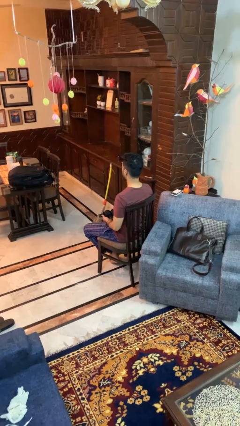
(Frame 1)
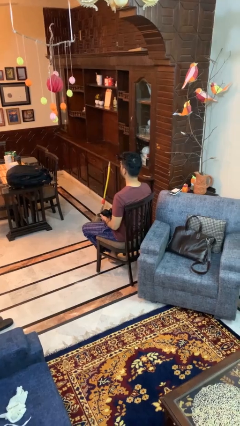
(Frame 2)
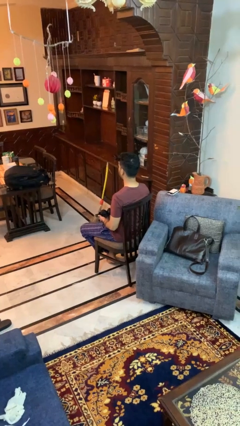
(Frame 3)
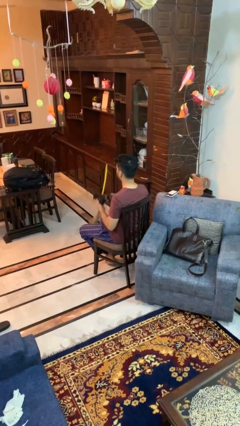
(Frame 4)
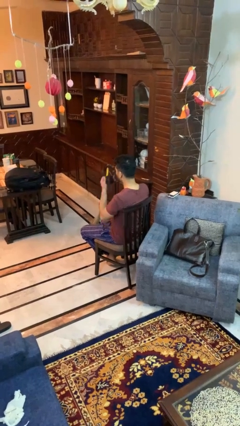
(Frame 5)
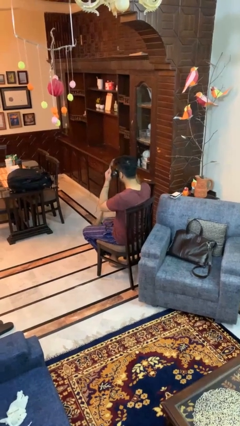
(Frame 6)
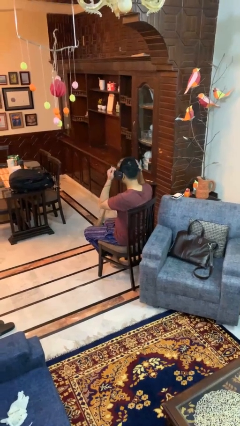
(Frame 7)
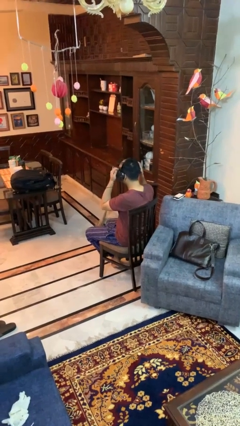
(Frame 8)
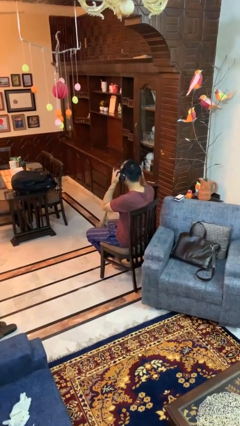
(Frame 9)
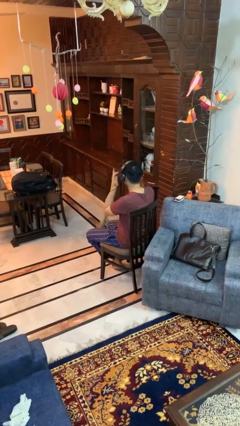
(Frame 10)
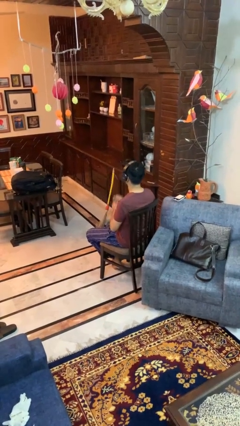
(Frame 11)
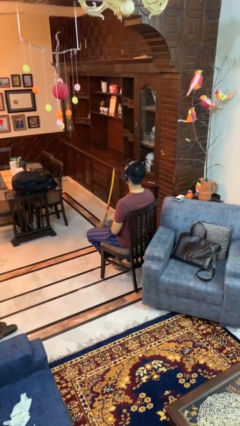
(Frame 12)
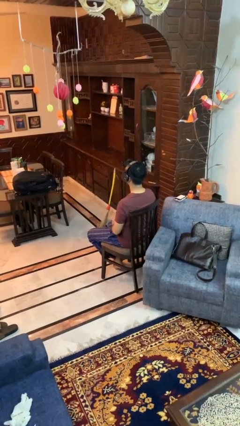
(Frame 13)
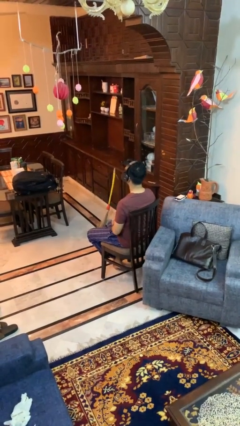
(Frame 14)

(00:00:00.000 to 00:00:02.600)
person puts on headphones

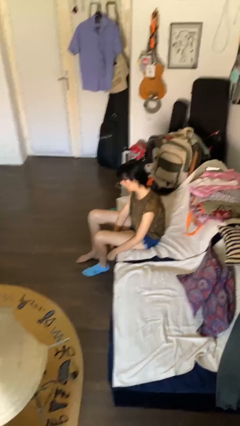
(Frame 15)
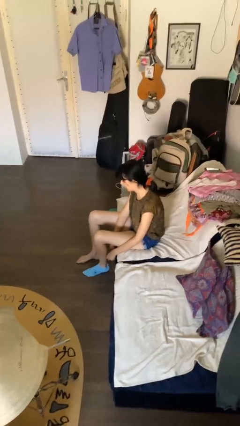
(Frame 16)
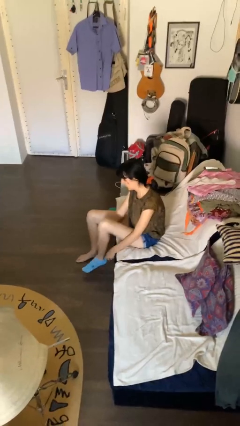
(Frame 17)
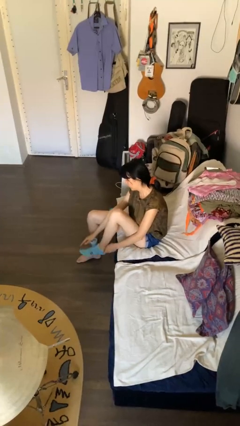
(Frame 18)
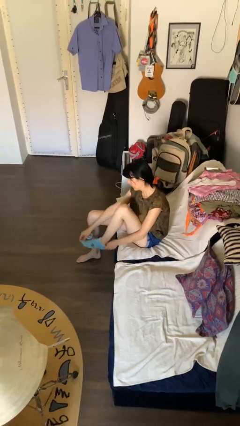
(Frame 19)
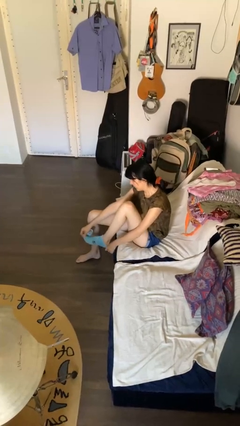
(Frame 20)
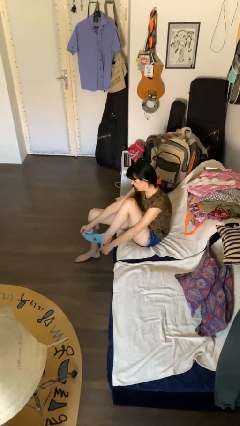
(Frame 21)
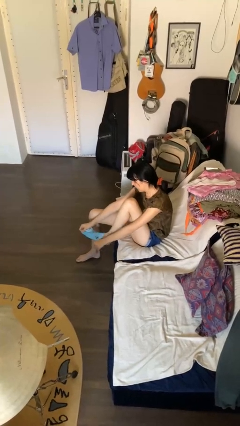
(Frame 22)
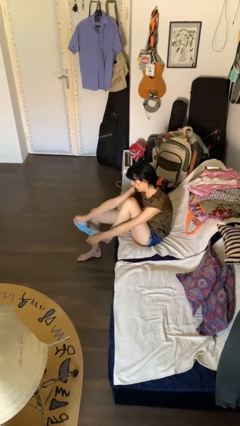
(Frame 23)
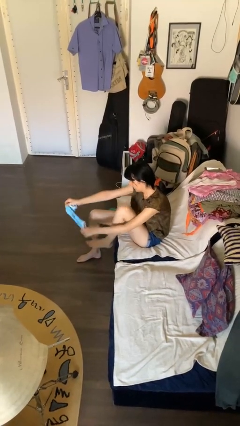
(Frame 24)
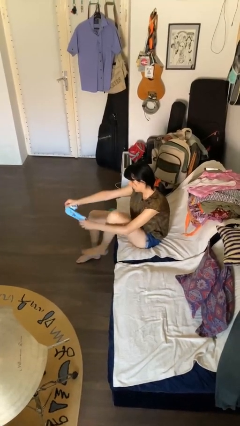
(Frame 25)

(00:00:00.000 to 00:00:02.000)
person takes off socks

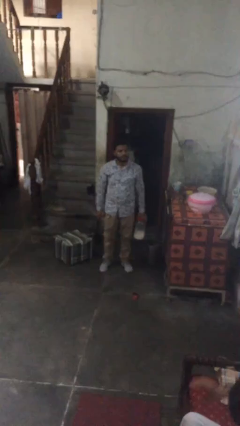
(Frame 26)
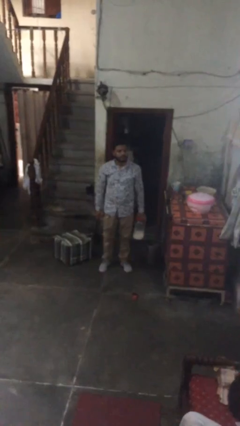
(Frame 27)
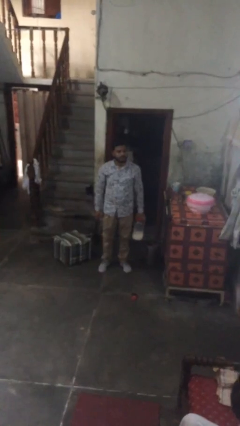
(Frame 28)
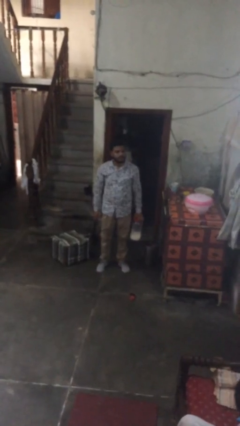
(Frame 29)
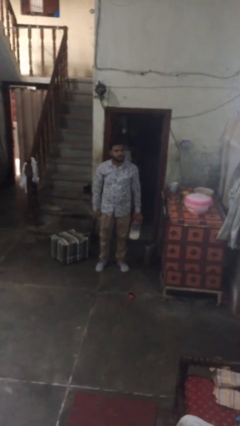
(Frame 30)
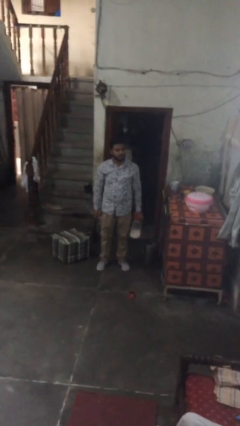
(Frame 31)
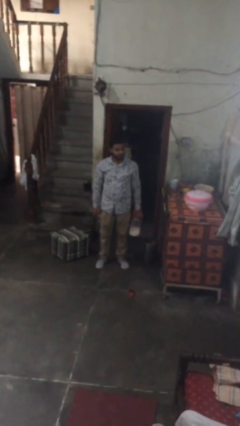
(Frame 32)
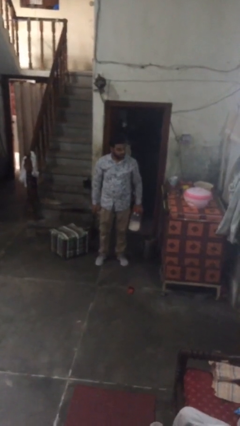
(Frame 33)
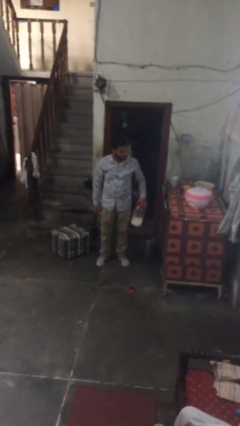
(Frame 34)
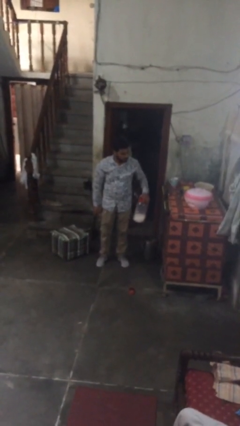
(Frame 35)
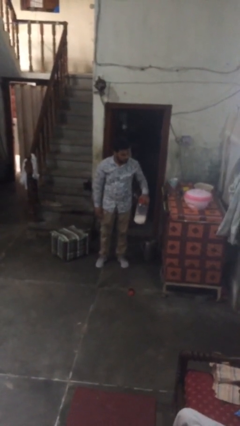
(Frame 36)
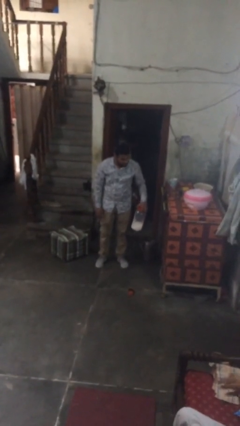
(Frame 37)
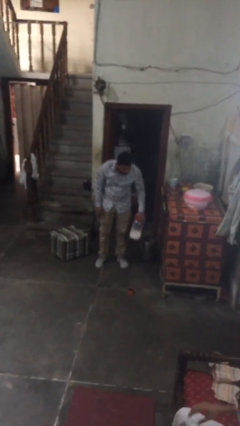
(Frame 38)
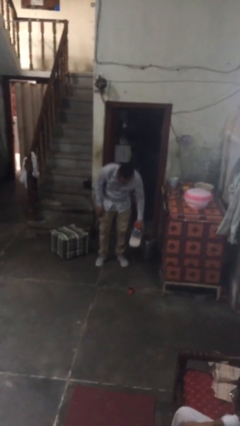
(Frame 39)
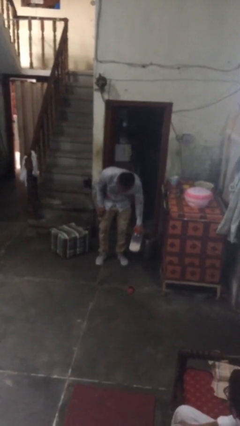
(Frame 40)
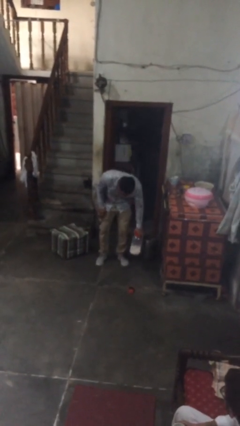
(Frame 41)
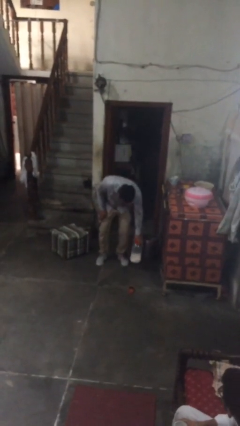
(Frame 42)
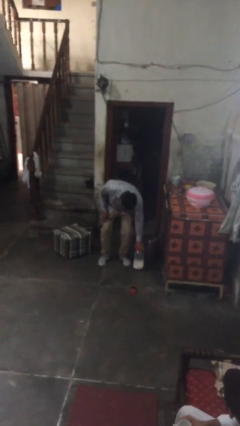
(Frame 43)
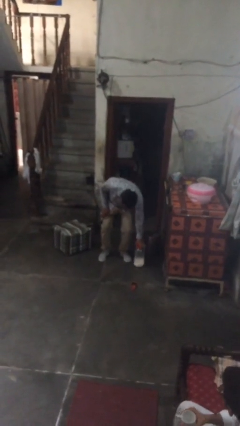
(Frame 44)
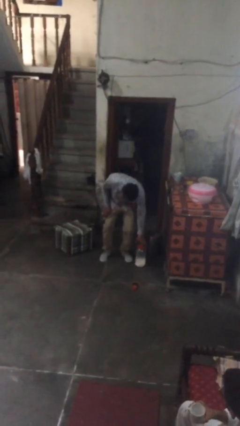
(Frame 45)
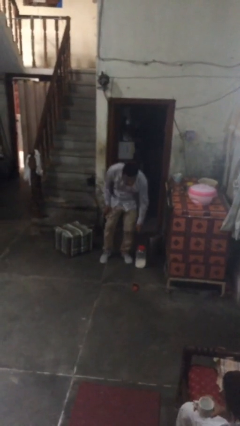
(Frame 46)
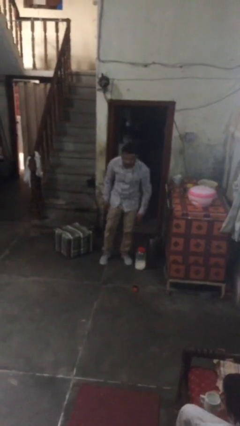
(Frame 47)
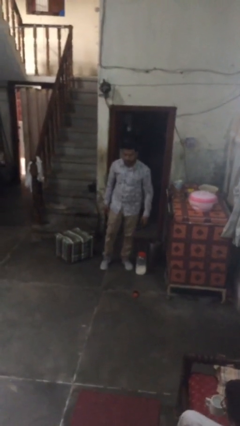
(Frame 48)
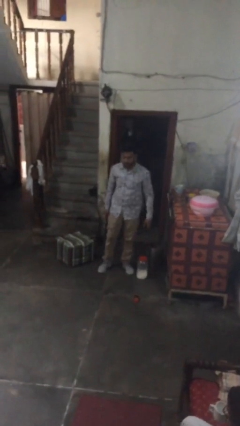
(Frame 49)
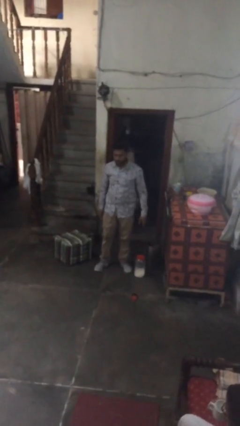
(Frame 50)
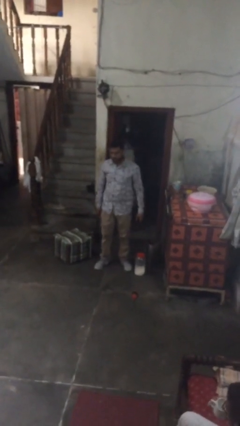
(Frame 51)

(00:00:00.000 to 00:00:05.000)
person puts down object on floor

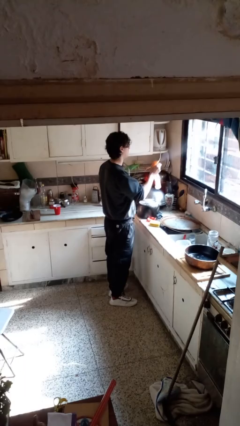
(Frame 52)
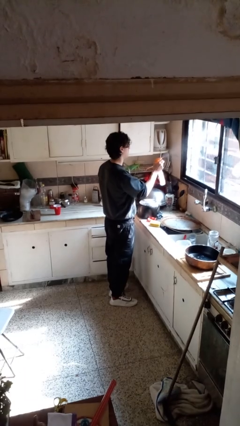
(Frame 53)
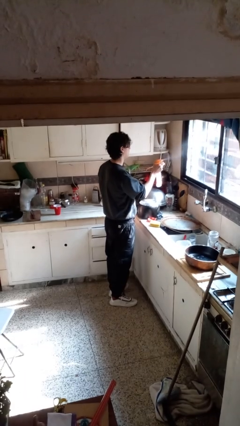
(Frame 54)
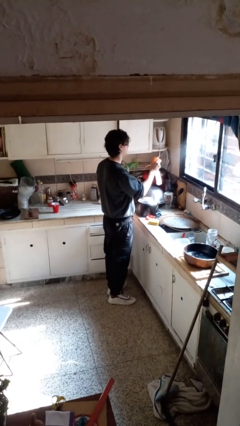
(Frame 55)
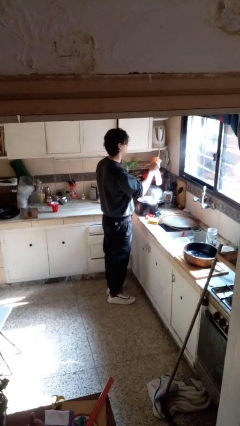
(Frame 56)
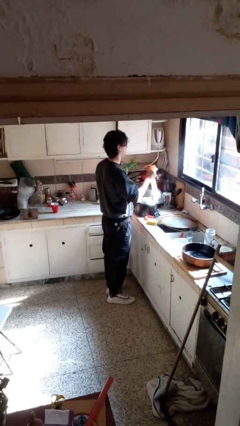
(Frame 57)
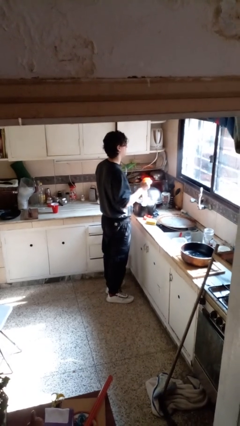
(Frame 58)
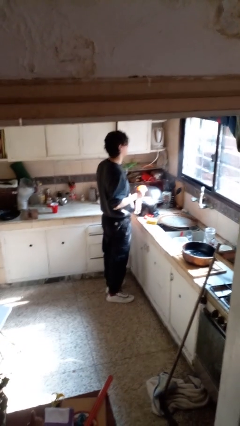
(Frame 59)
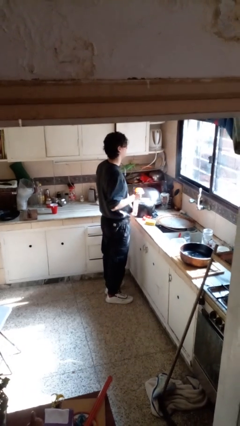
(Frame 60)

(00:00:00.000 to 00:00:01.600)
person sprays from bottle

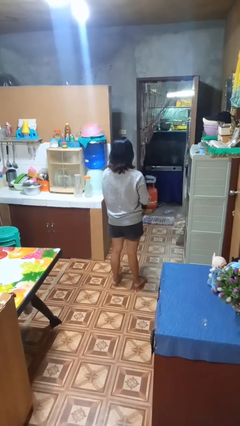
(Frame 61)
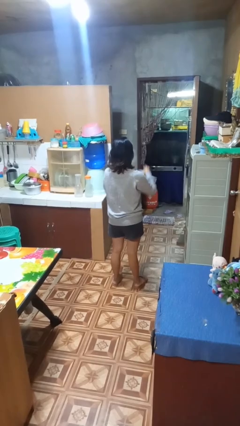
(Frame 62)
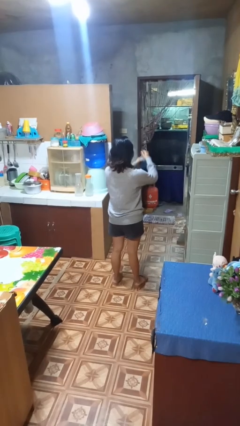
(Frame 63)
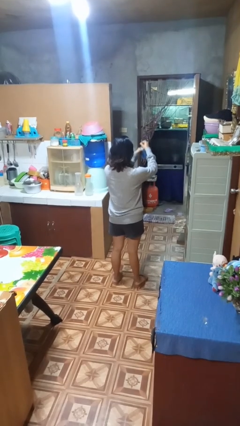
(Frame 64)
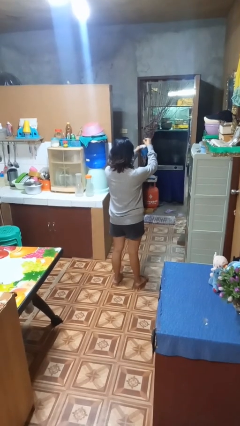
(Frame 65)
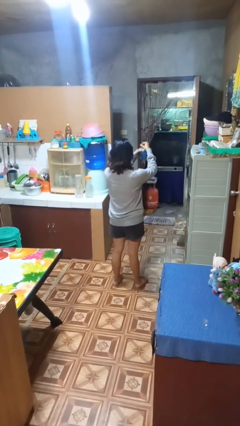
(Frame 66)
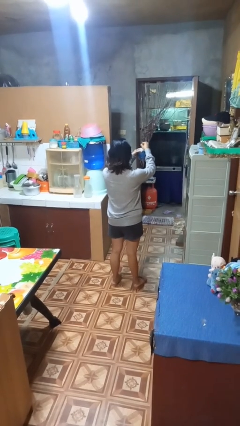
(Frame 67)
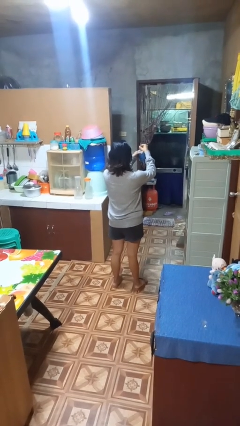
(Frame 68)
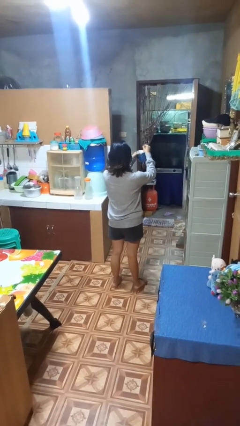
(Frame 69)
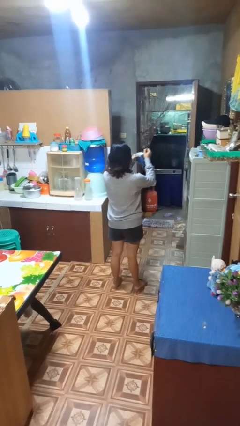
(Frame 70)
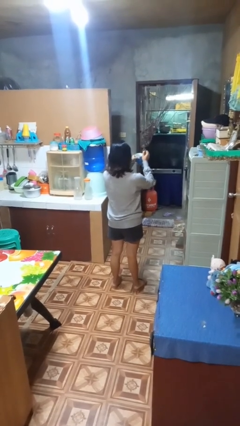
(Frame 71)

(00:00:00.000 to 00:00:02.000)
person stirs mug

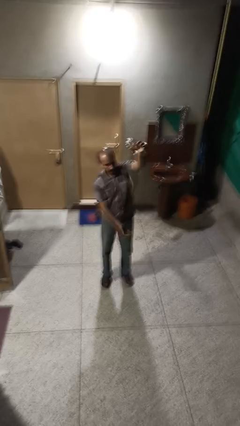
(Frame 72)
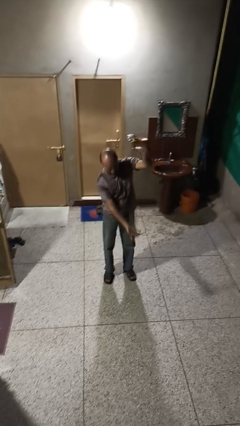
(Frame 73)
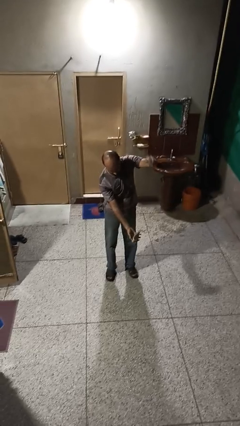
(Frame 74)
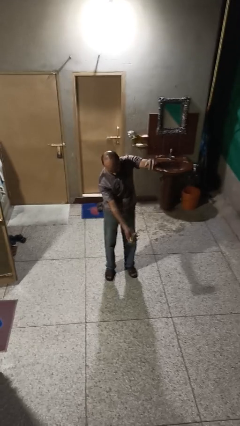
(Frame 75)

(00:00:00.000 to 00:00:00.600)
person drops object

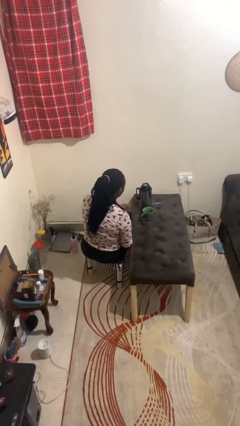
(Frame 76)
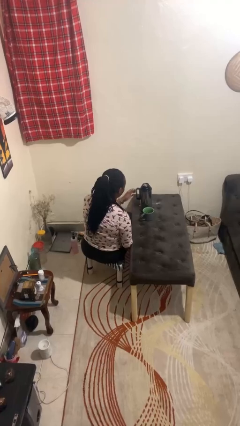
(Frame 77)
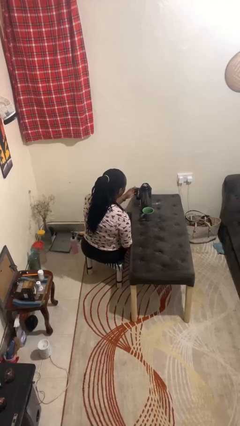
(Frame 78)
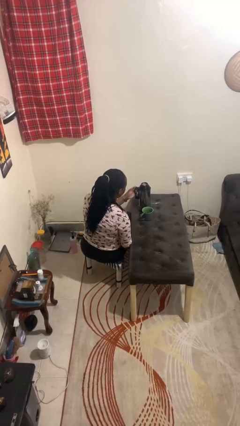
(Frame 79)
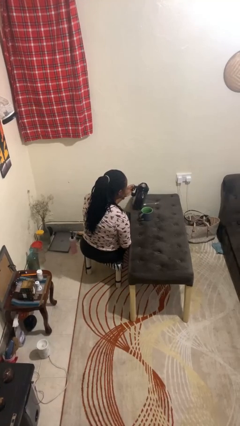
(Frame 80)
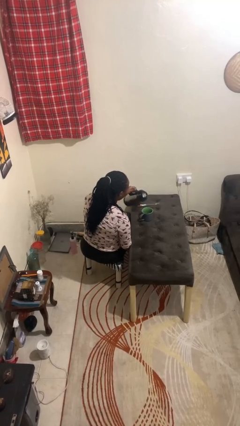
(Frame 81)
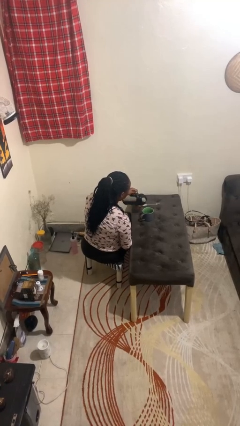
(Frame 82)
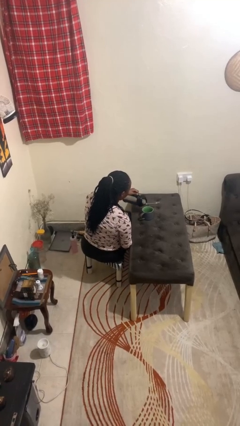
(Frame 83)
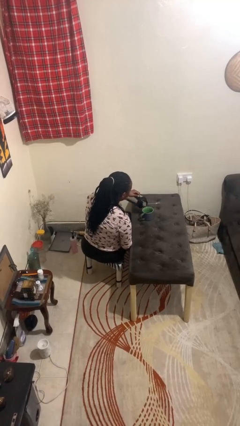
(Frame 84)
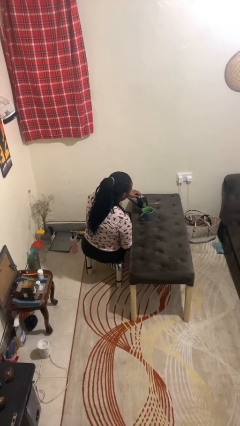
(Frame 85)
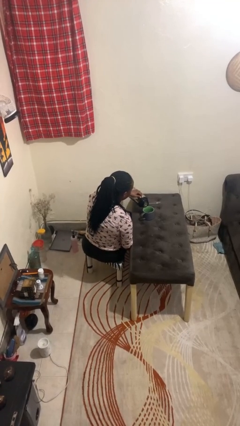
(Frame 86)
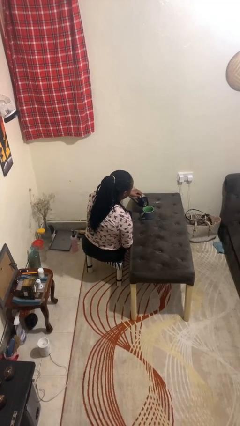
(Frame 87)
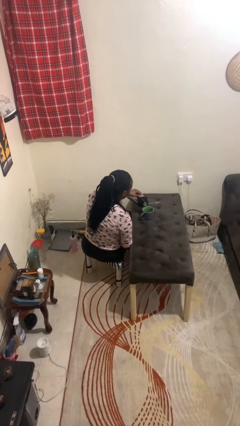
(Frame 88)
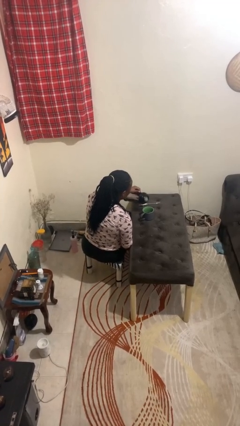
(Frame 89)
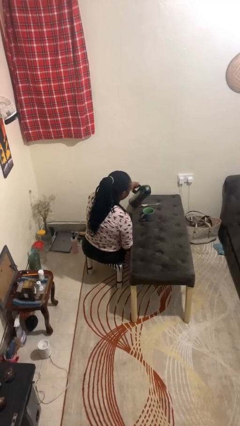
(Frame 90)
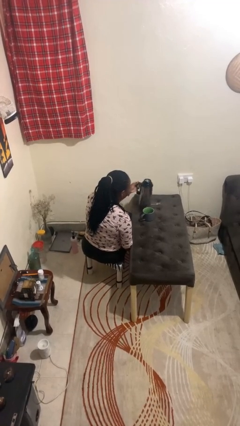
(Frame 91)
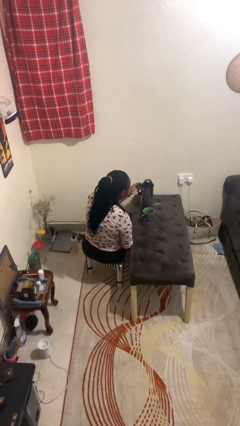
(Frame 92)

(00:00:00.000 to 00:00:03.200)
person pours coffee into mug
